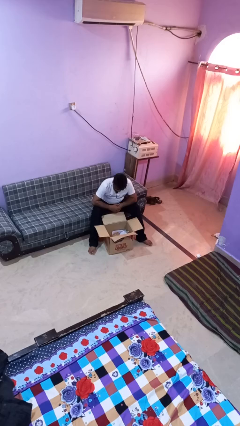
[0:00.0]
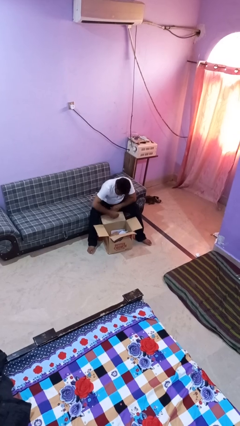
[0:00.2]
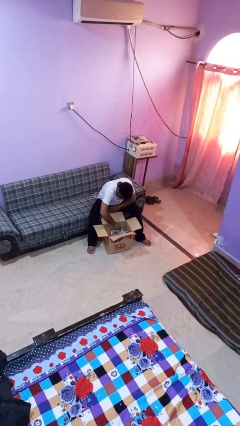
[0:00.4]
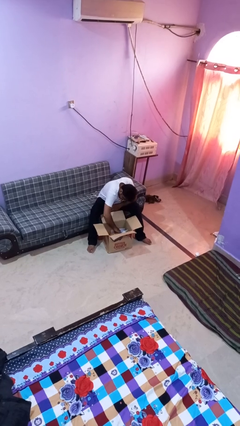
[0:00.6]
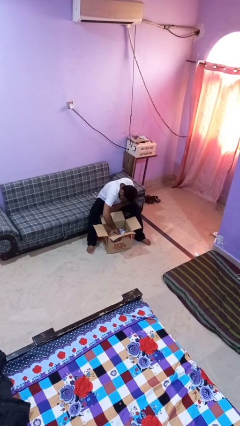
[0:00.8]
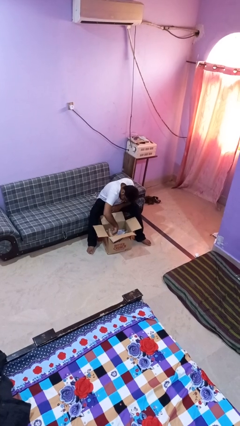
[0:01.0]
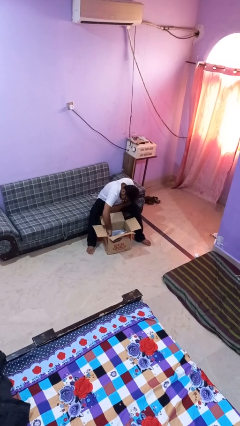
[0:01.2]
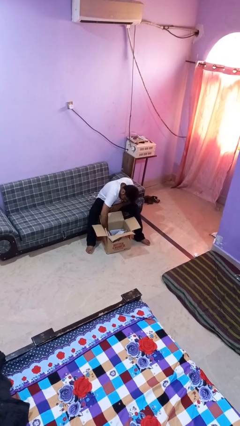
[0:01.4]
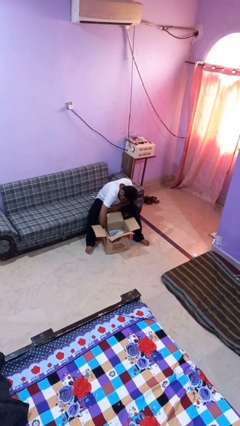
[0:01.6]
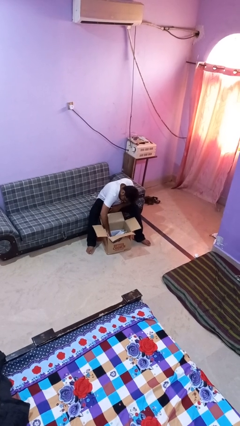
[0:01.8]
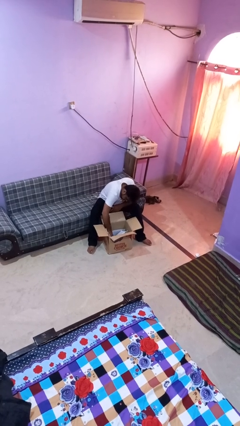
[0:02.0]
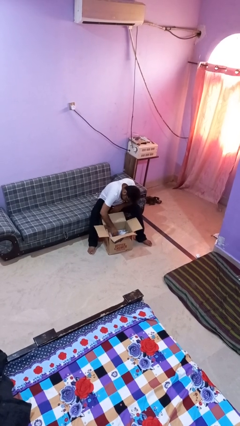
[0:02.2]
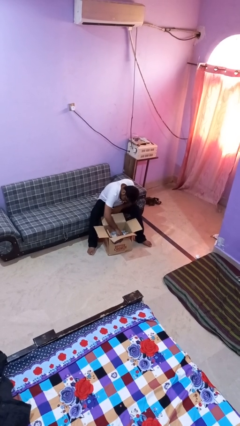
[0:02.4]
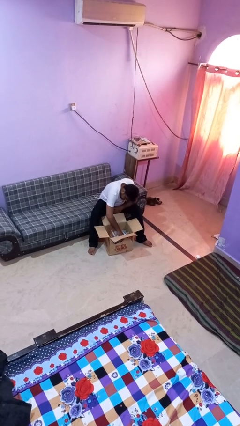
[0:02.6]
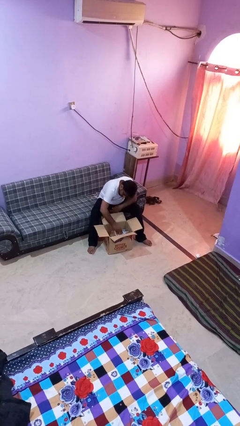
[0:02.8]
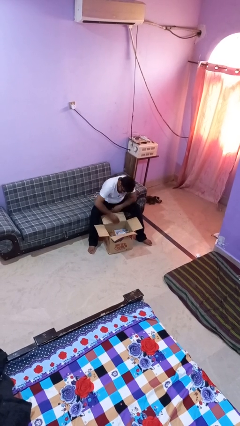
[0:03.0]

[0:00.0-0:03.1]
person searches in box

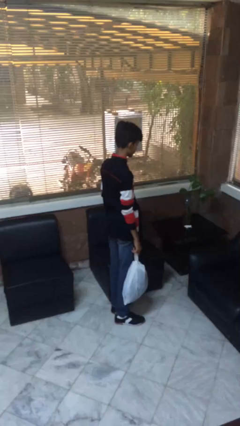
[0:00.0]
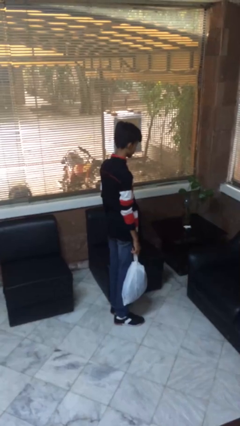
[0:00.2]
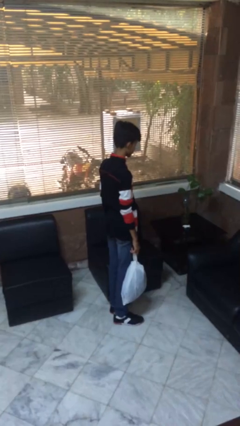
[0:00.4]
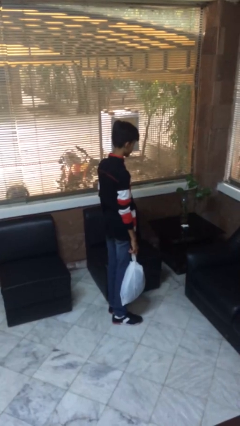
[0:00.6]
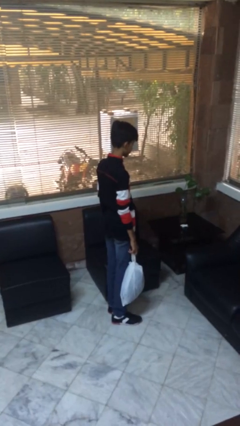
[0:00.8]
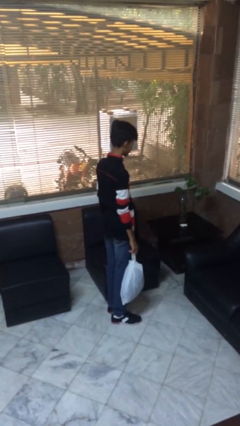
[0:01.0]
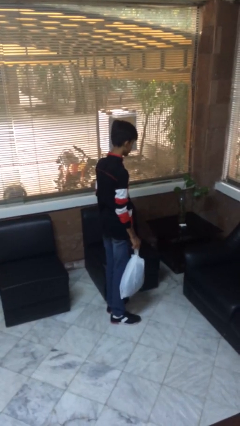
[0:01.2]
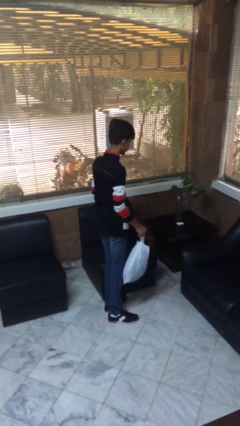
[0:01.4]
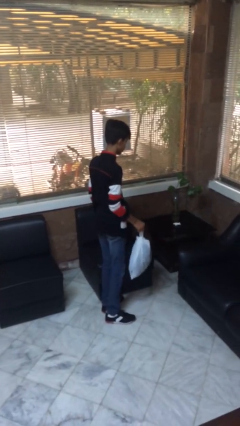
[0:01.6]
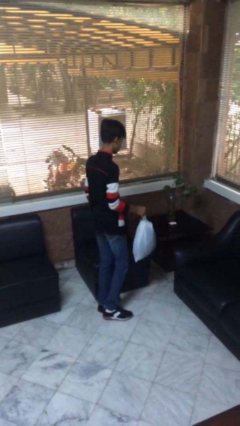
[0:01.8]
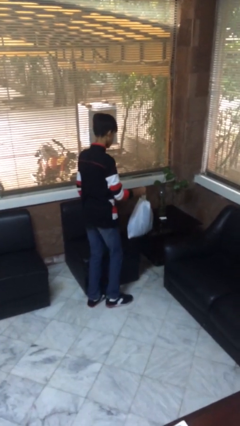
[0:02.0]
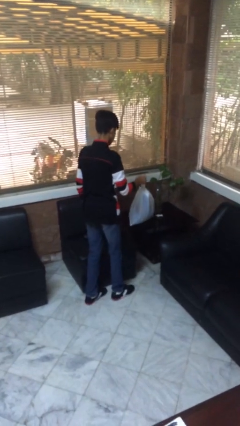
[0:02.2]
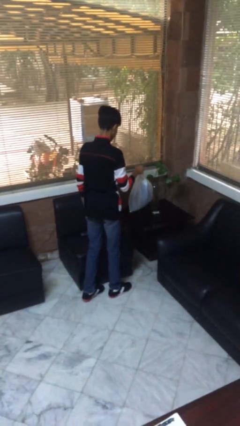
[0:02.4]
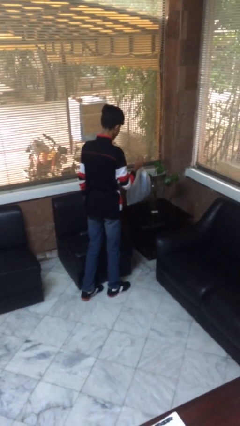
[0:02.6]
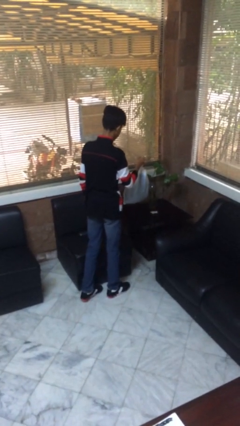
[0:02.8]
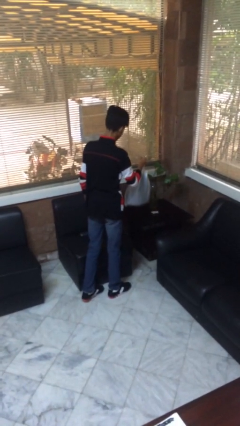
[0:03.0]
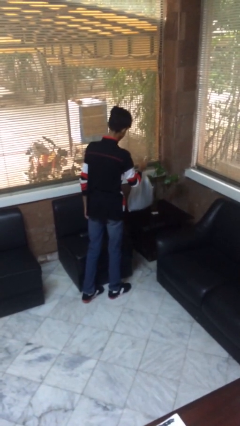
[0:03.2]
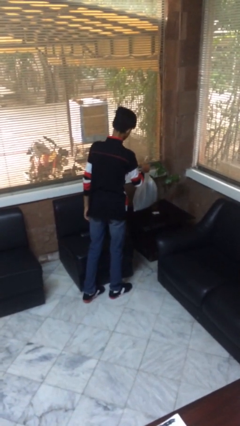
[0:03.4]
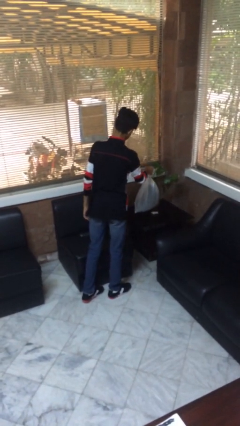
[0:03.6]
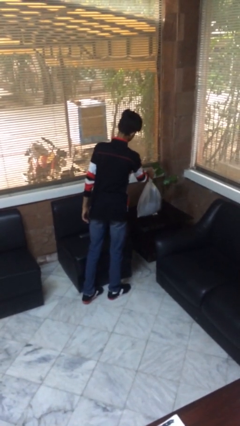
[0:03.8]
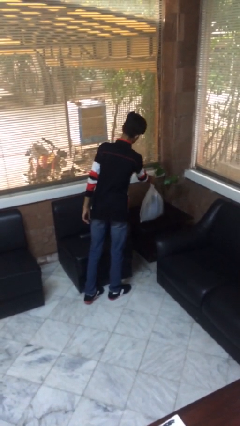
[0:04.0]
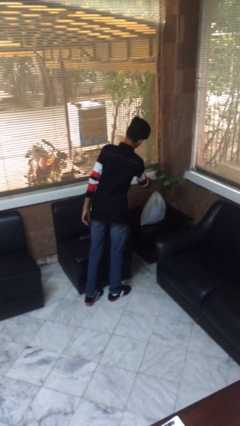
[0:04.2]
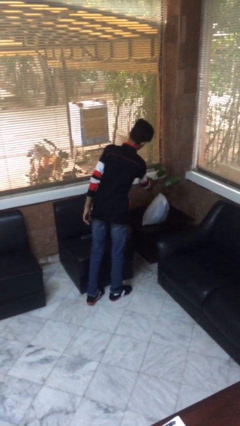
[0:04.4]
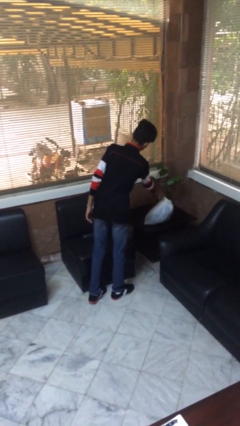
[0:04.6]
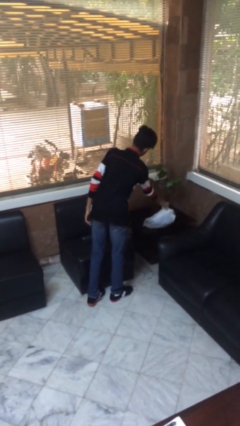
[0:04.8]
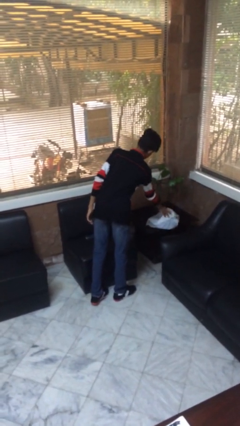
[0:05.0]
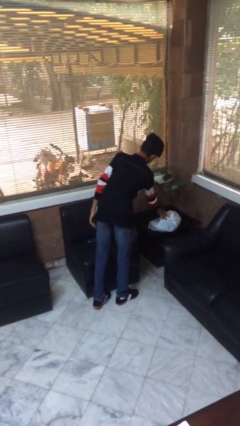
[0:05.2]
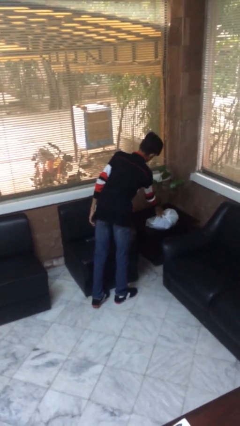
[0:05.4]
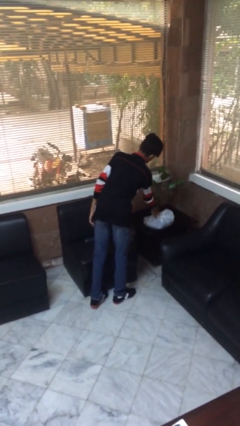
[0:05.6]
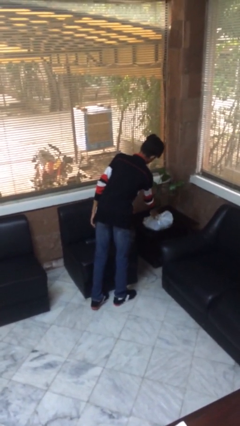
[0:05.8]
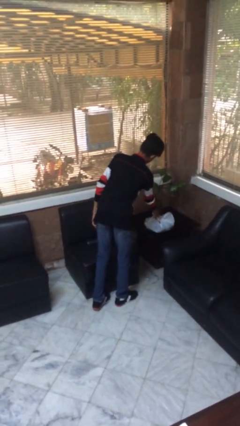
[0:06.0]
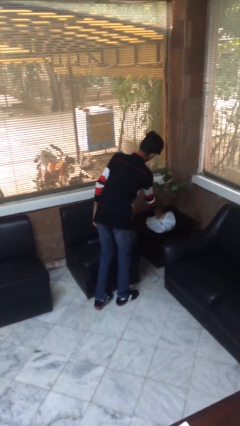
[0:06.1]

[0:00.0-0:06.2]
person puts down object on table

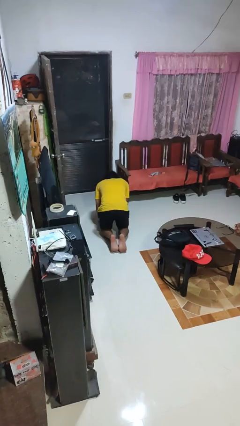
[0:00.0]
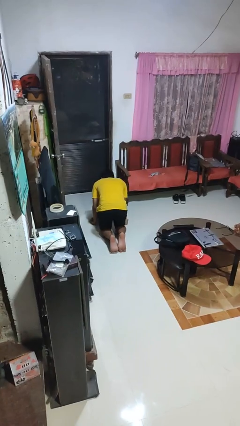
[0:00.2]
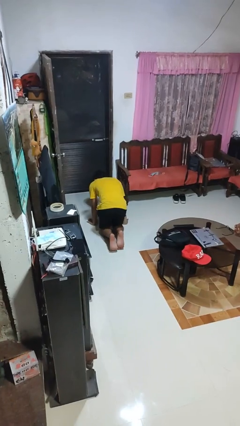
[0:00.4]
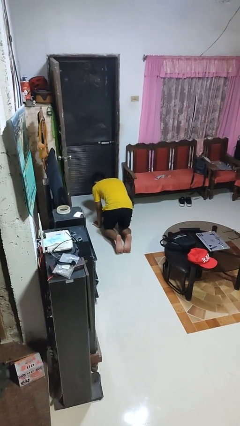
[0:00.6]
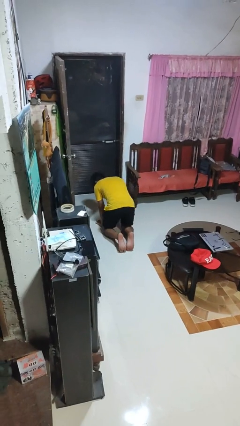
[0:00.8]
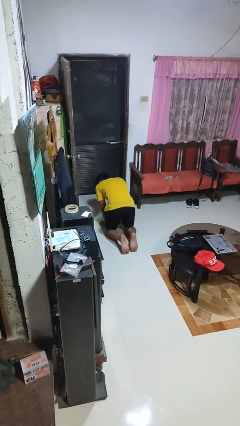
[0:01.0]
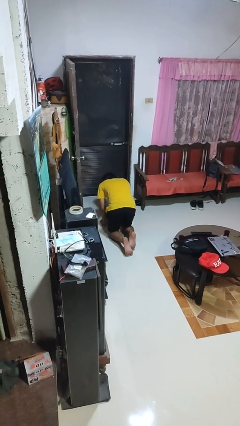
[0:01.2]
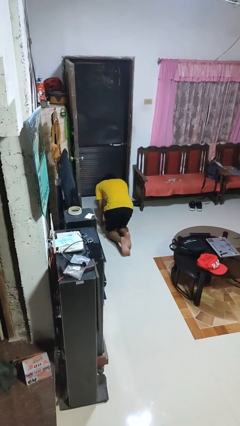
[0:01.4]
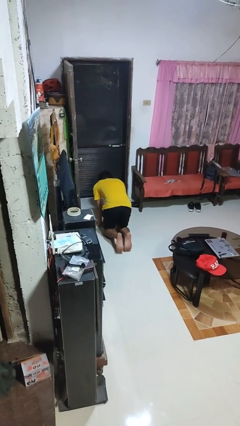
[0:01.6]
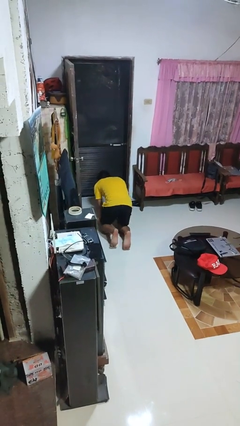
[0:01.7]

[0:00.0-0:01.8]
person crawls

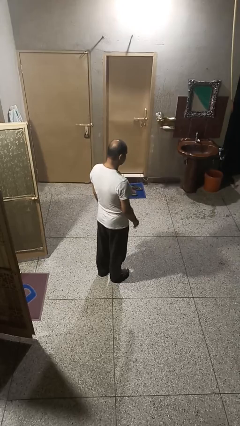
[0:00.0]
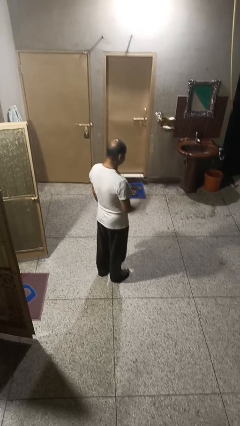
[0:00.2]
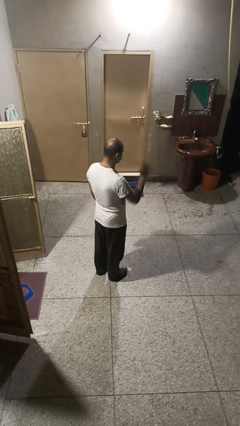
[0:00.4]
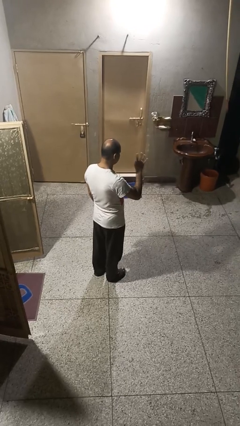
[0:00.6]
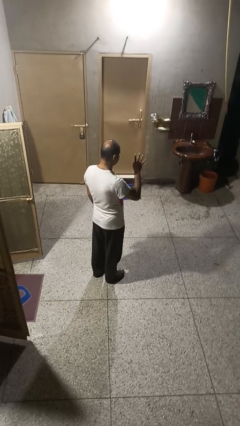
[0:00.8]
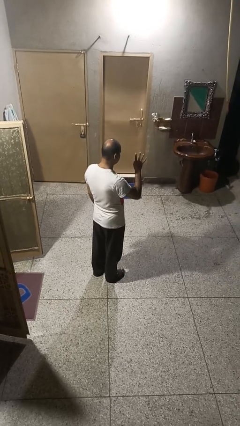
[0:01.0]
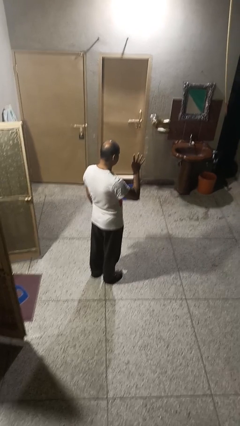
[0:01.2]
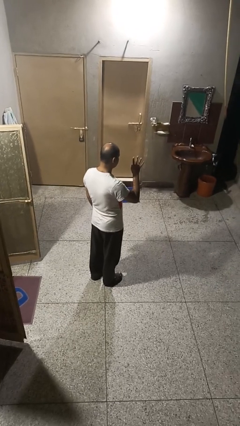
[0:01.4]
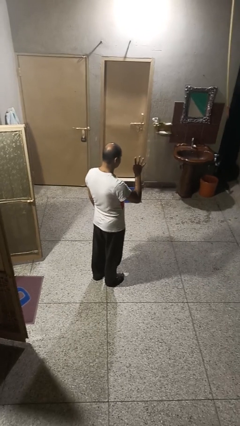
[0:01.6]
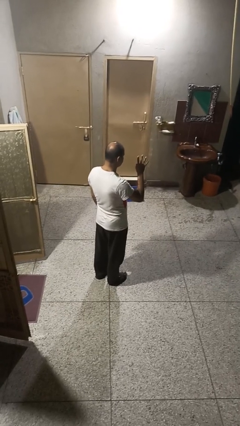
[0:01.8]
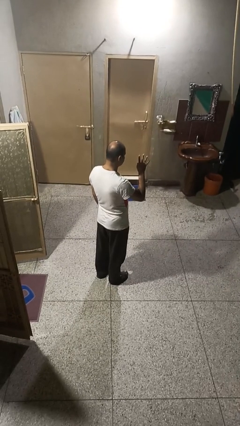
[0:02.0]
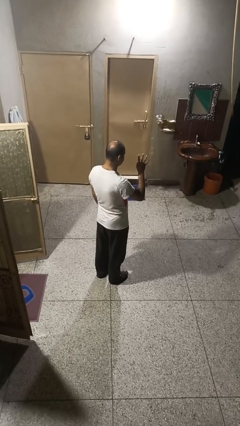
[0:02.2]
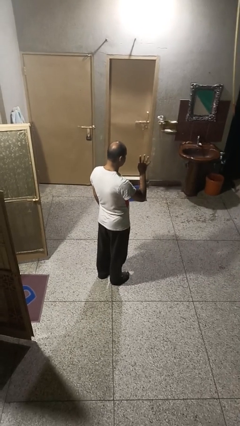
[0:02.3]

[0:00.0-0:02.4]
person gestures number four

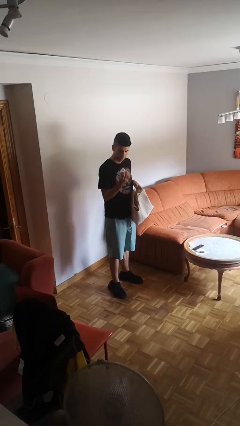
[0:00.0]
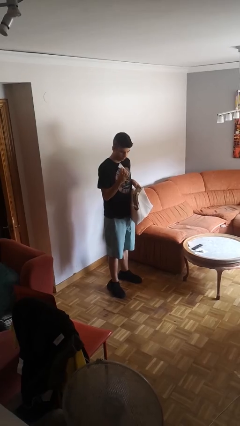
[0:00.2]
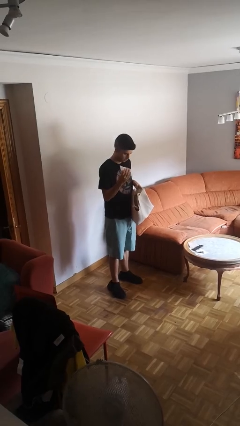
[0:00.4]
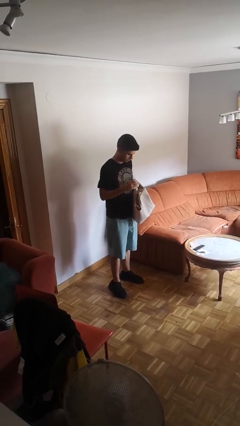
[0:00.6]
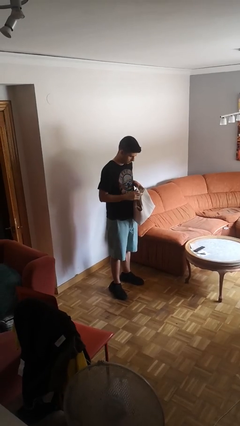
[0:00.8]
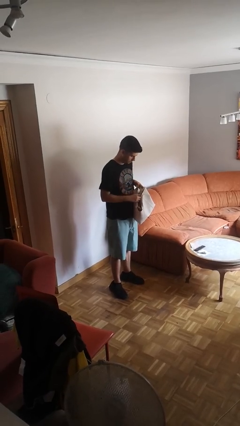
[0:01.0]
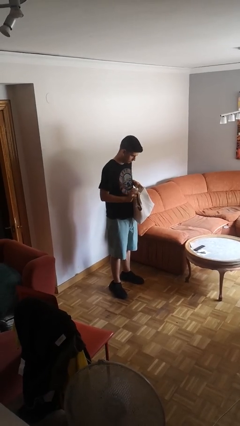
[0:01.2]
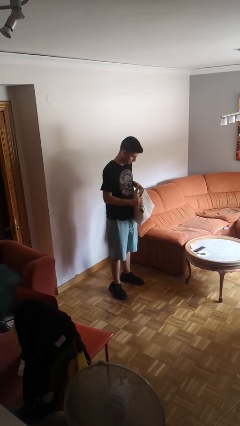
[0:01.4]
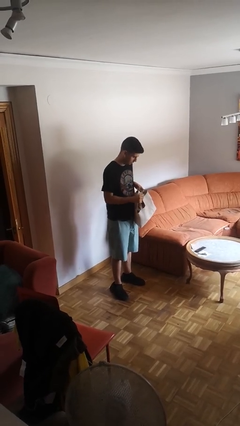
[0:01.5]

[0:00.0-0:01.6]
person puts object into purse

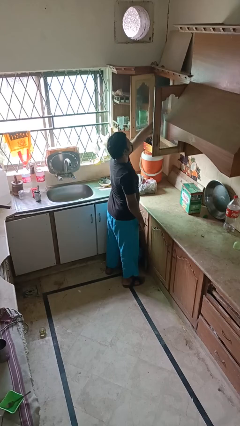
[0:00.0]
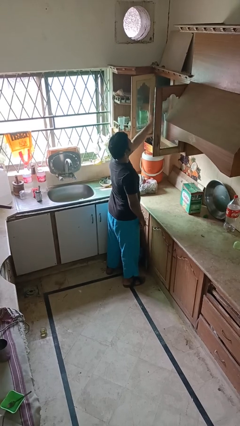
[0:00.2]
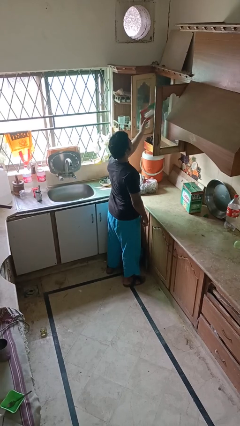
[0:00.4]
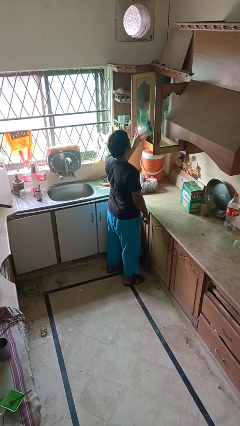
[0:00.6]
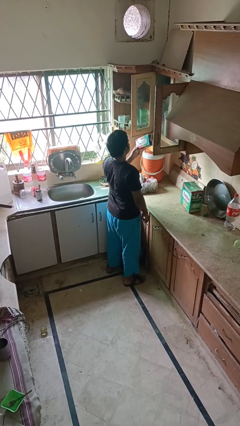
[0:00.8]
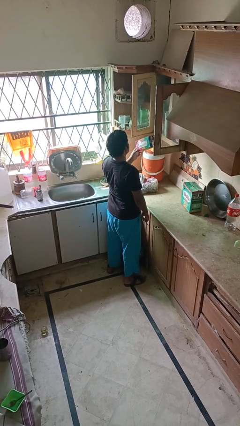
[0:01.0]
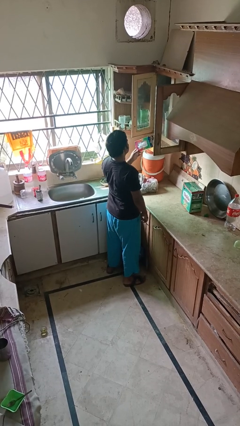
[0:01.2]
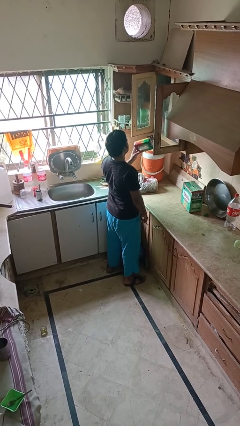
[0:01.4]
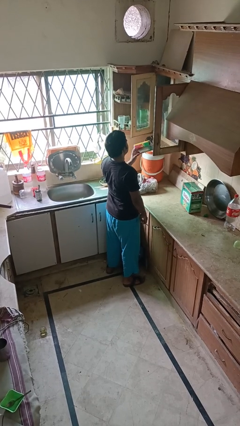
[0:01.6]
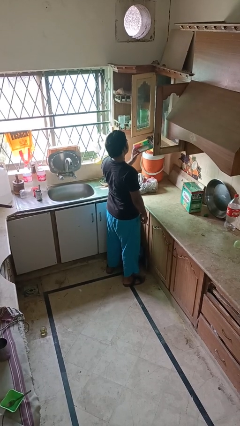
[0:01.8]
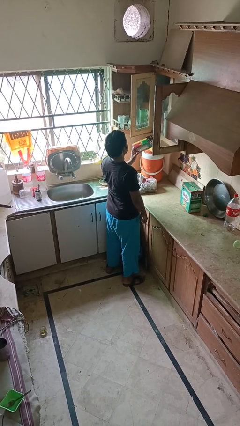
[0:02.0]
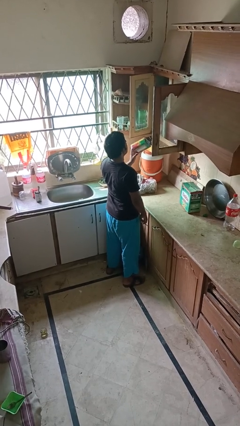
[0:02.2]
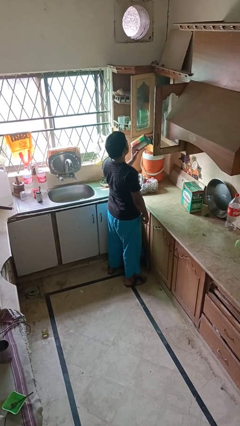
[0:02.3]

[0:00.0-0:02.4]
person picks up object from cabinet
